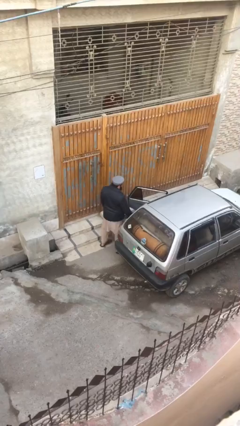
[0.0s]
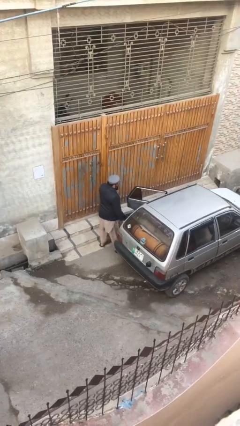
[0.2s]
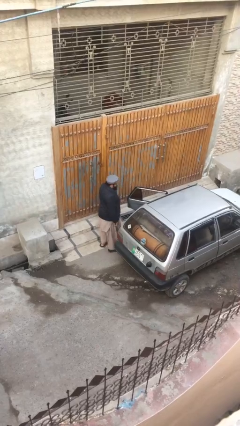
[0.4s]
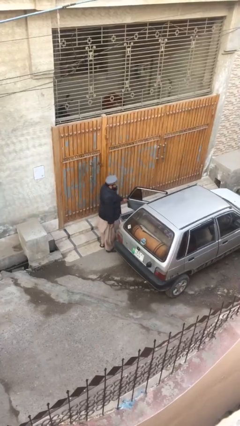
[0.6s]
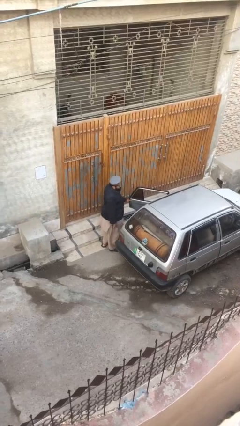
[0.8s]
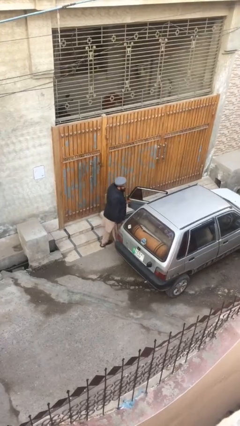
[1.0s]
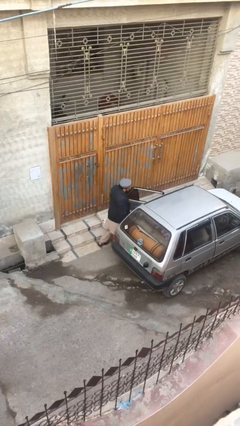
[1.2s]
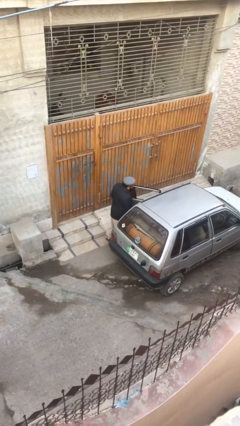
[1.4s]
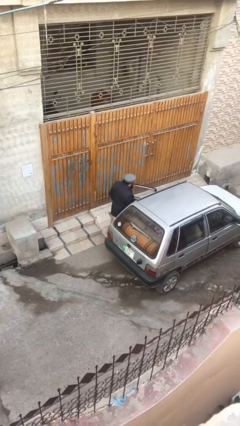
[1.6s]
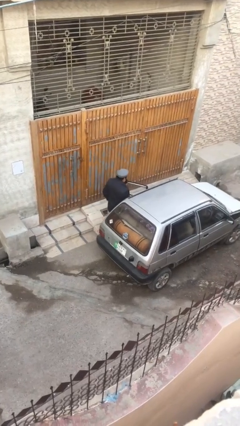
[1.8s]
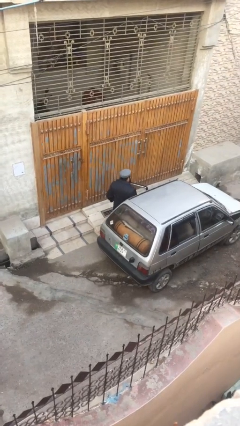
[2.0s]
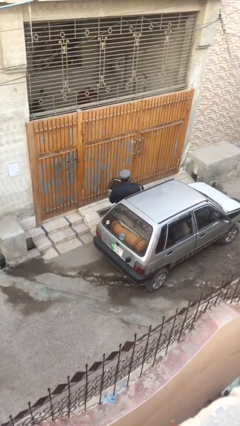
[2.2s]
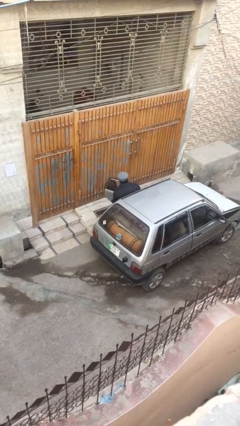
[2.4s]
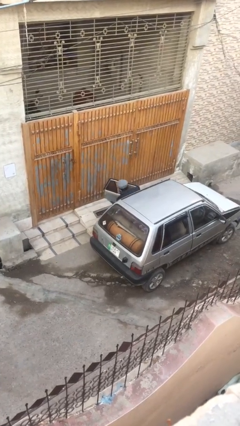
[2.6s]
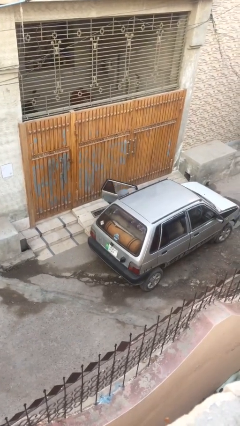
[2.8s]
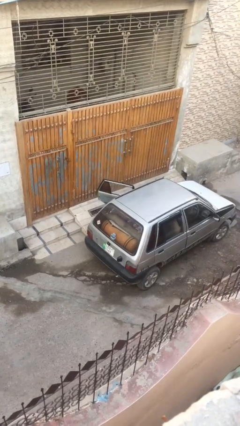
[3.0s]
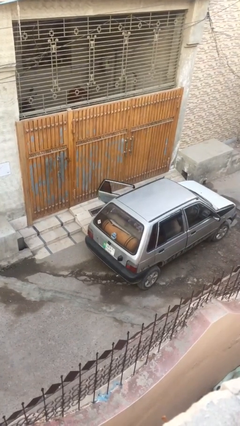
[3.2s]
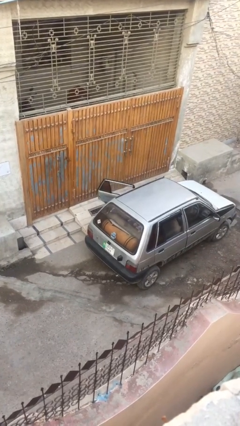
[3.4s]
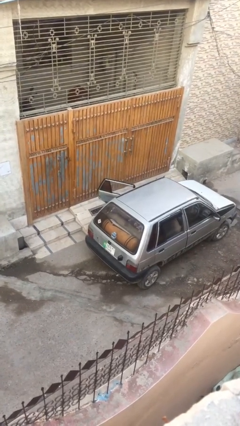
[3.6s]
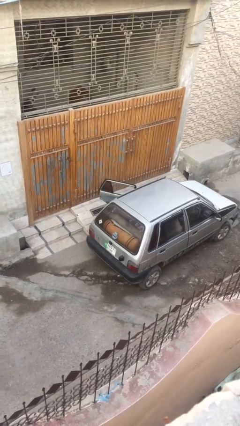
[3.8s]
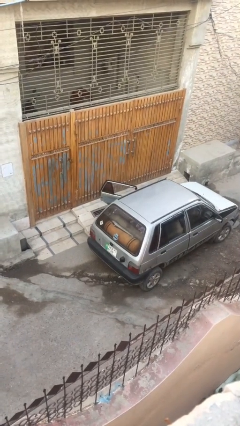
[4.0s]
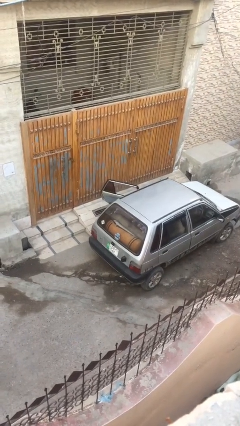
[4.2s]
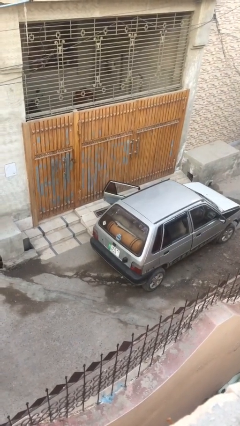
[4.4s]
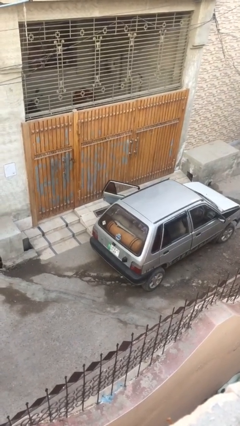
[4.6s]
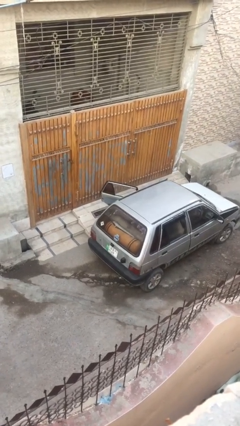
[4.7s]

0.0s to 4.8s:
person enters car

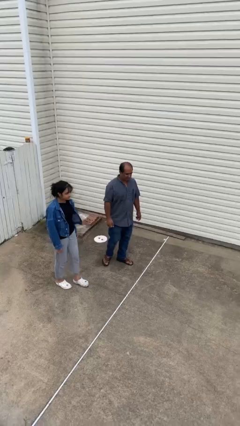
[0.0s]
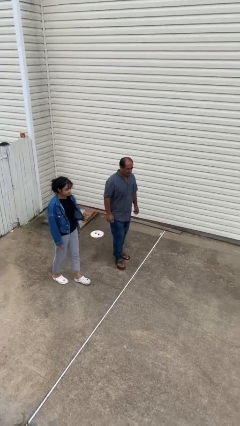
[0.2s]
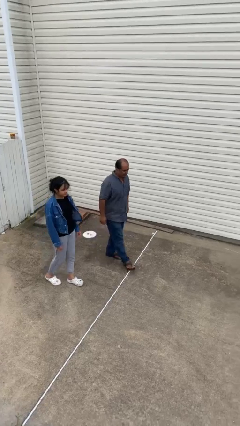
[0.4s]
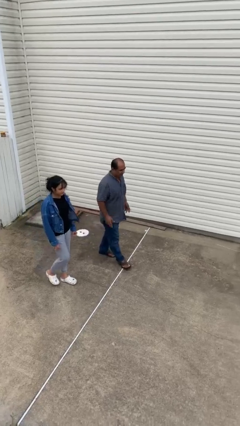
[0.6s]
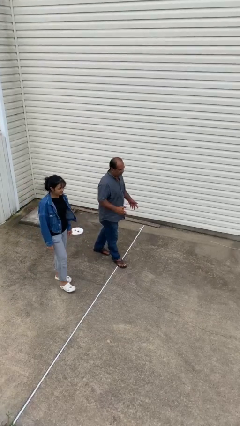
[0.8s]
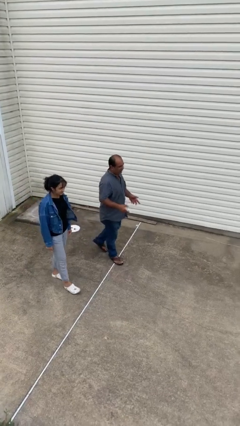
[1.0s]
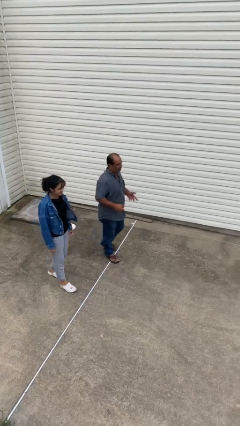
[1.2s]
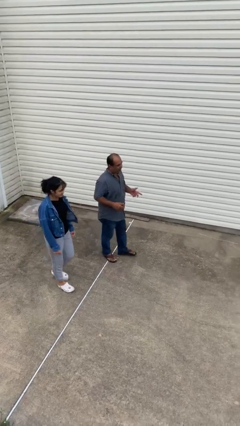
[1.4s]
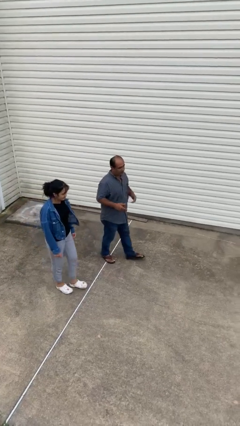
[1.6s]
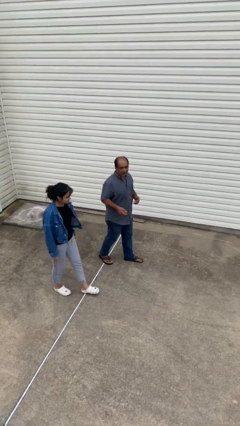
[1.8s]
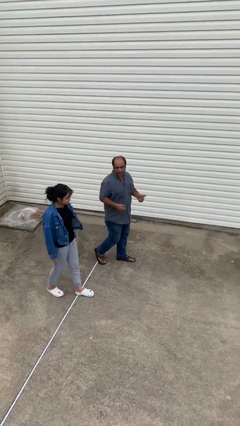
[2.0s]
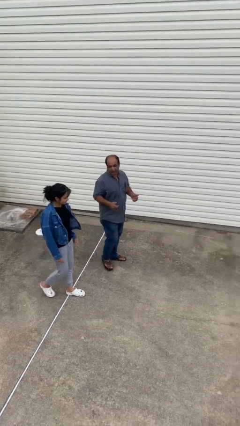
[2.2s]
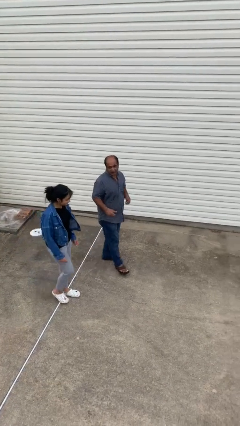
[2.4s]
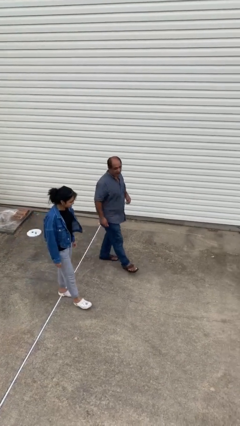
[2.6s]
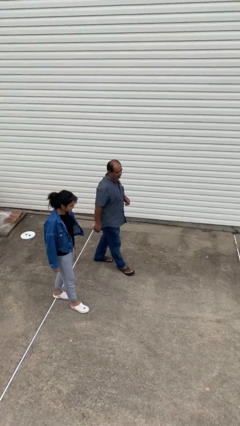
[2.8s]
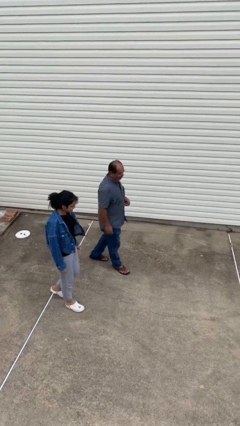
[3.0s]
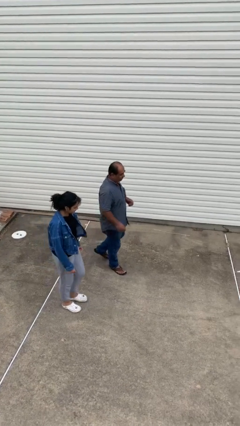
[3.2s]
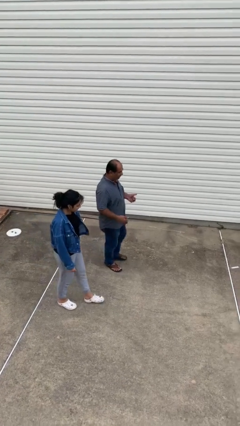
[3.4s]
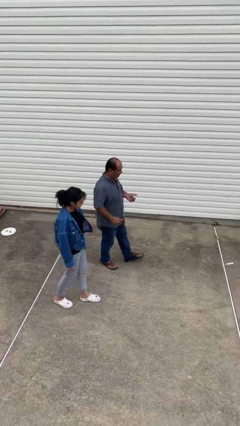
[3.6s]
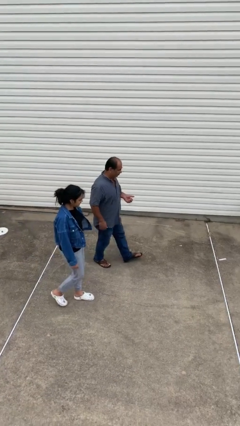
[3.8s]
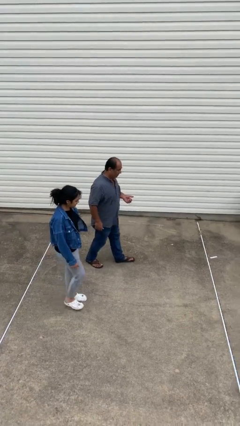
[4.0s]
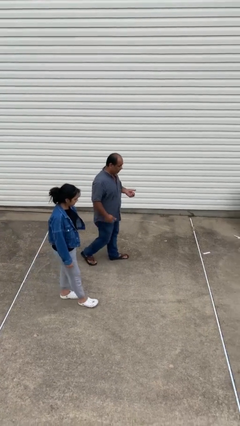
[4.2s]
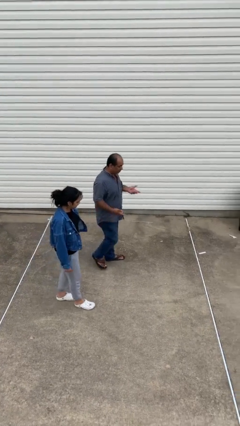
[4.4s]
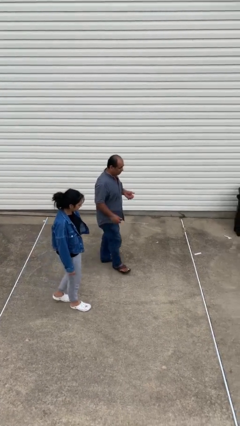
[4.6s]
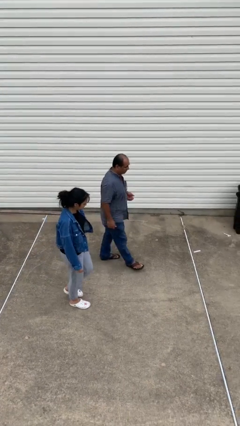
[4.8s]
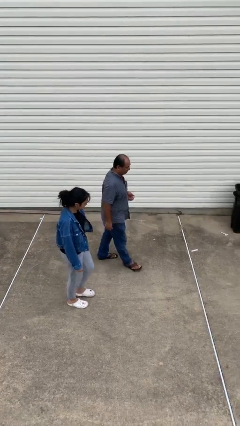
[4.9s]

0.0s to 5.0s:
person talks to person

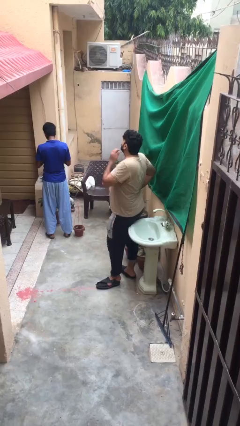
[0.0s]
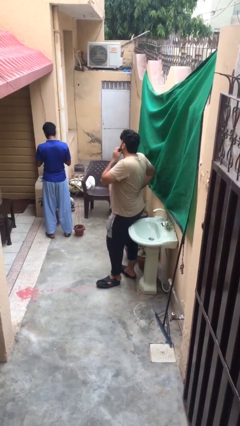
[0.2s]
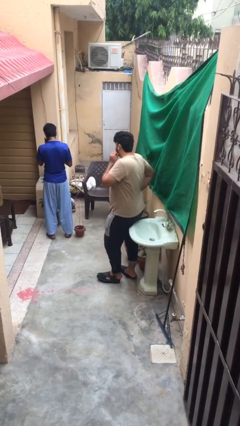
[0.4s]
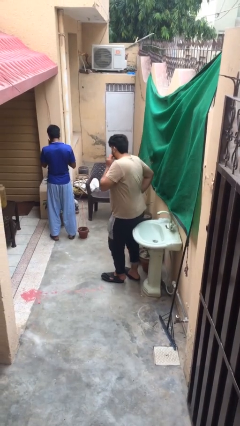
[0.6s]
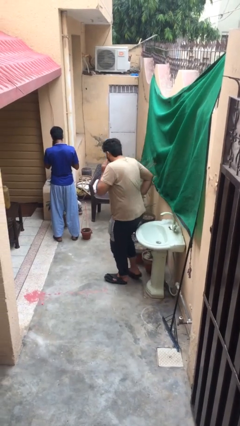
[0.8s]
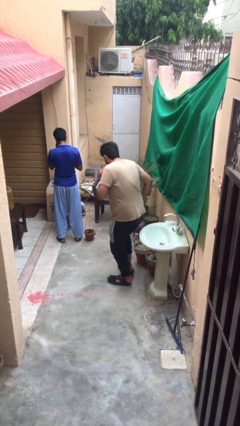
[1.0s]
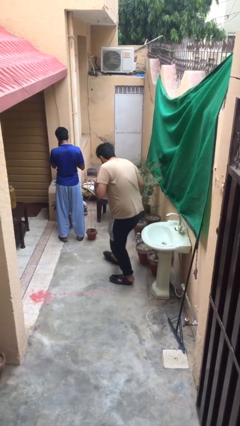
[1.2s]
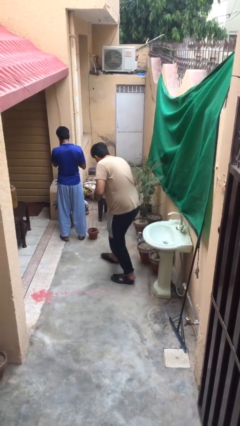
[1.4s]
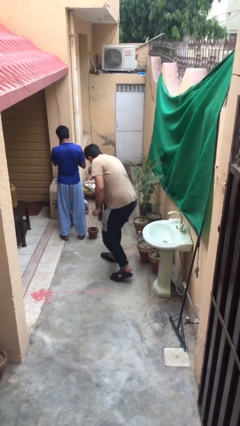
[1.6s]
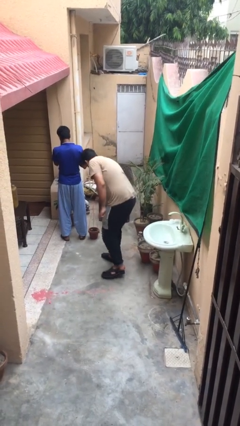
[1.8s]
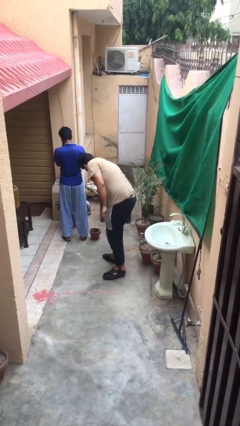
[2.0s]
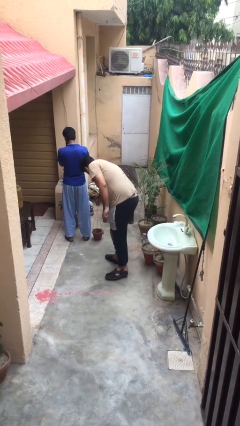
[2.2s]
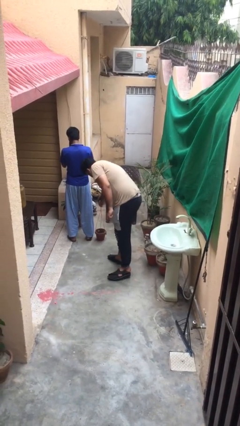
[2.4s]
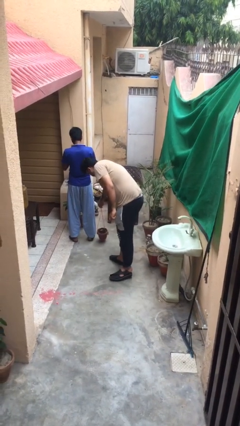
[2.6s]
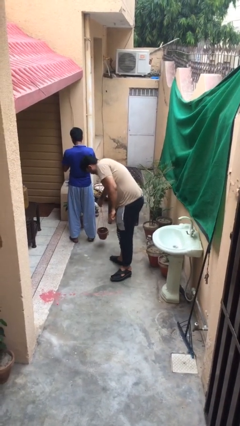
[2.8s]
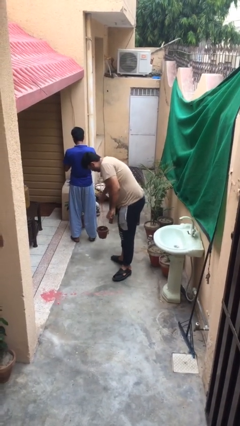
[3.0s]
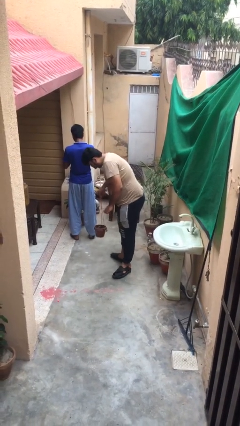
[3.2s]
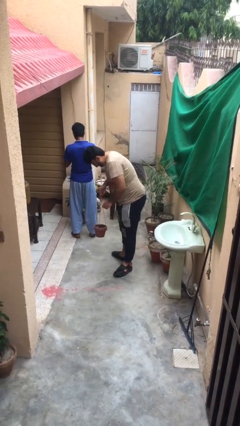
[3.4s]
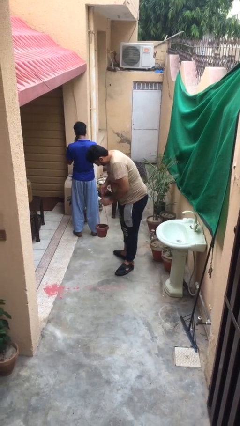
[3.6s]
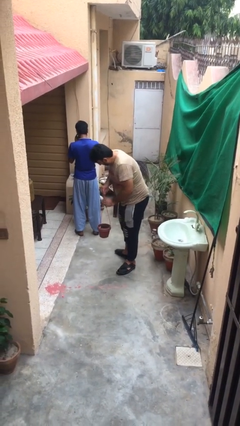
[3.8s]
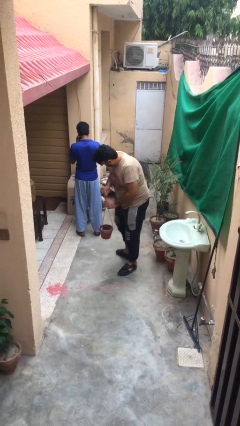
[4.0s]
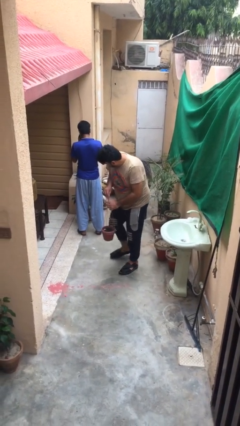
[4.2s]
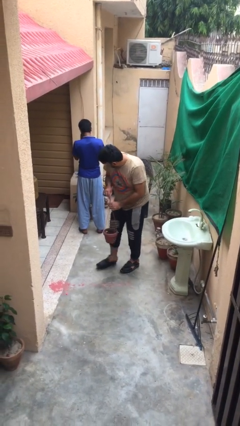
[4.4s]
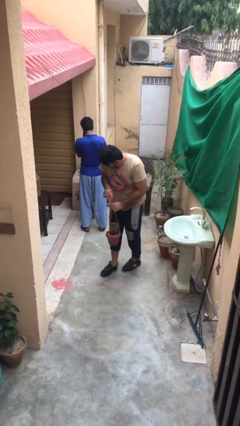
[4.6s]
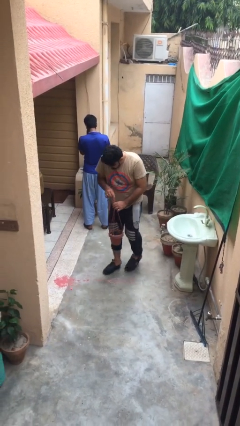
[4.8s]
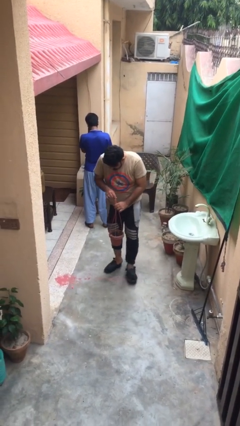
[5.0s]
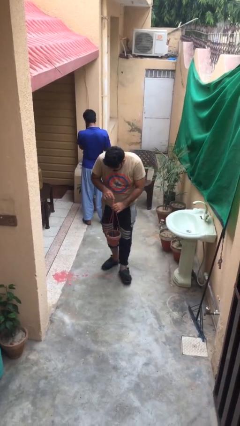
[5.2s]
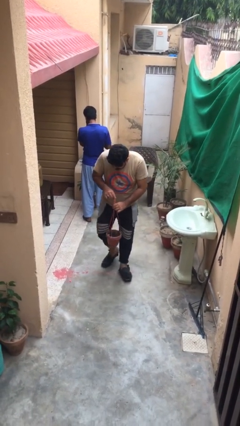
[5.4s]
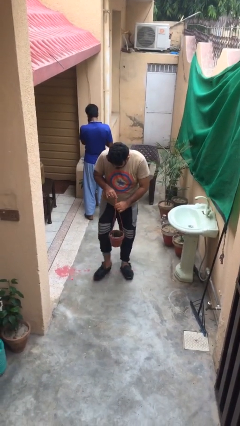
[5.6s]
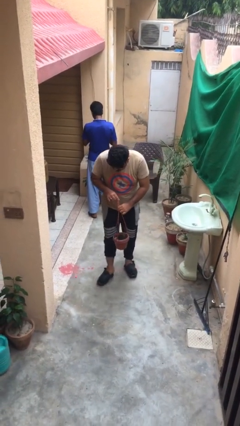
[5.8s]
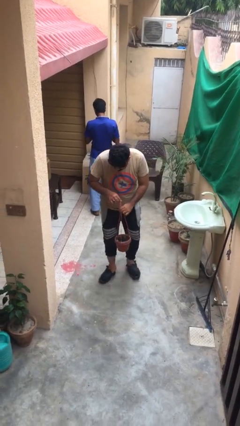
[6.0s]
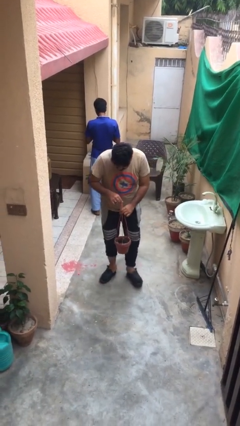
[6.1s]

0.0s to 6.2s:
person steals object from person

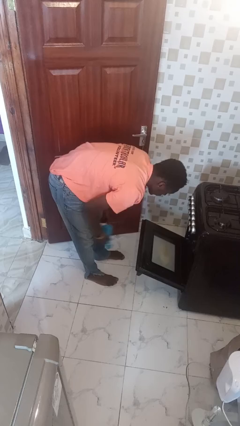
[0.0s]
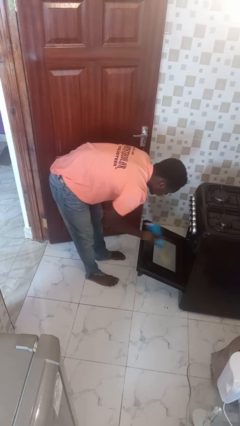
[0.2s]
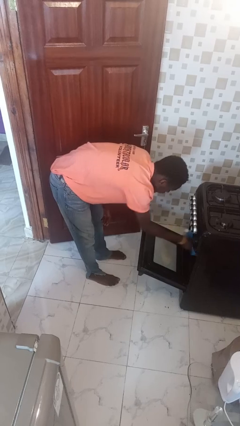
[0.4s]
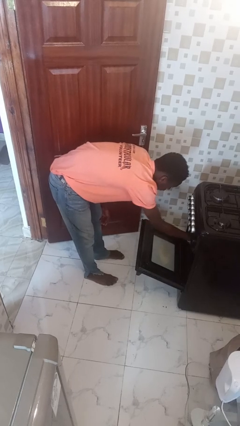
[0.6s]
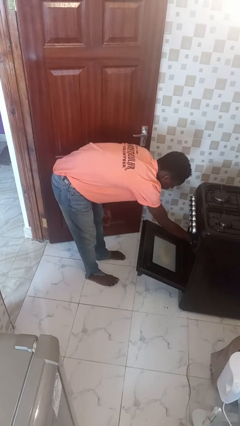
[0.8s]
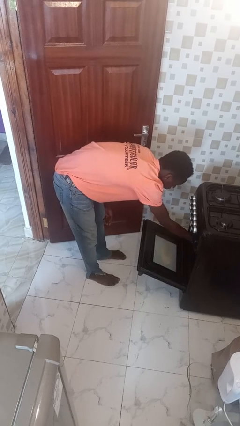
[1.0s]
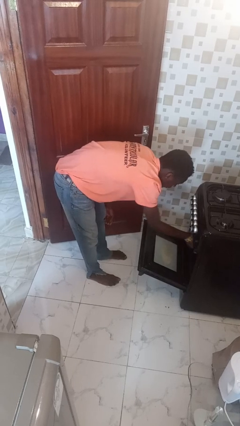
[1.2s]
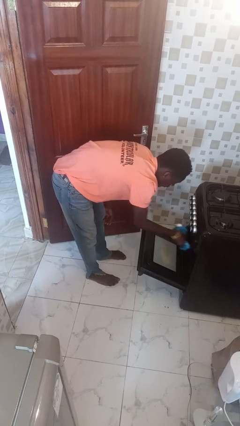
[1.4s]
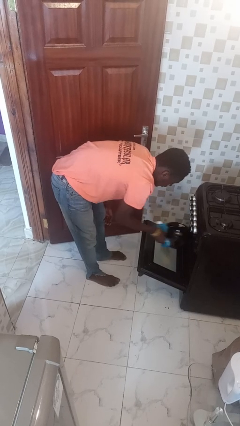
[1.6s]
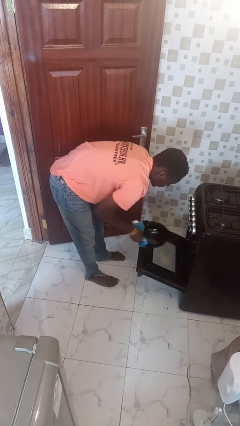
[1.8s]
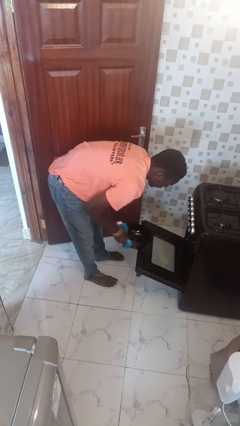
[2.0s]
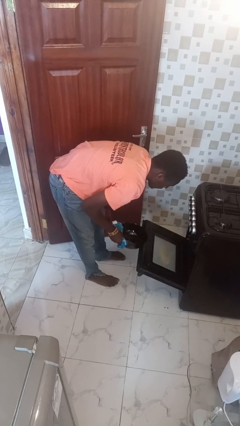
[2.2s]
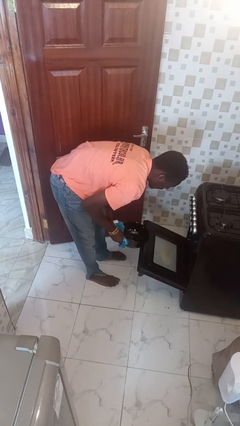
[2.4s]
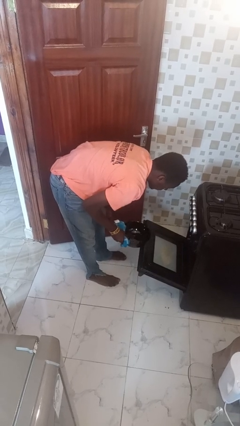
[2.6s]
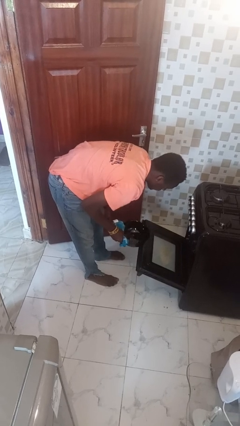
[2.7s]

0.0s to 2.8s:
person takes object from oven
